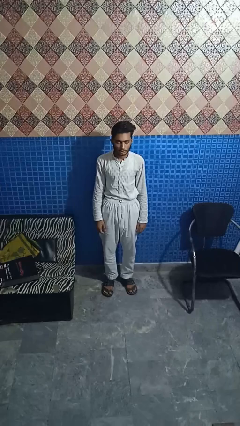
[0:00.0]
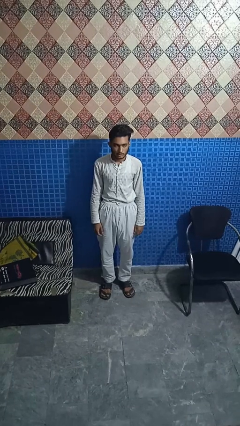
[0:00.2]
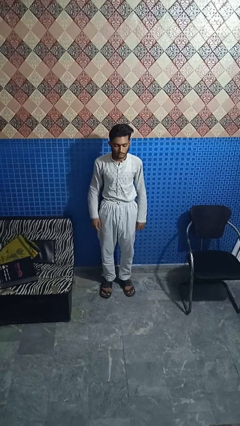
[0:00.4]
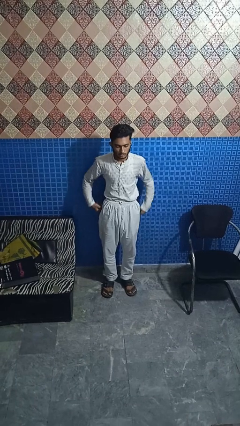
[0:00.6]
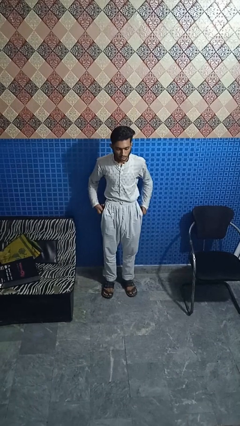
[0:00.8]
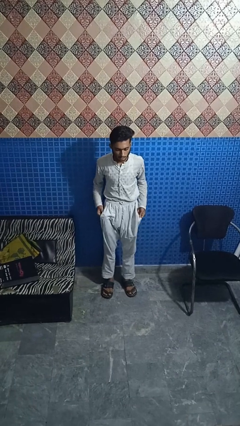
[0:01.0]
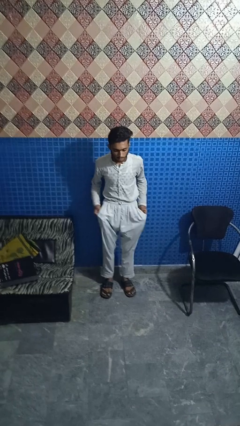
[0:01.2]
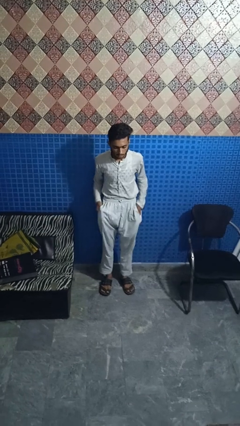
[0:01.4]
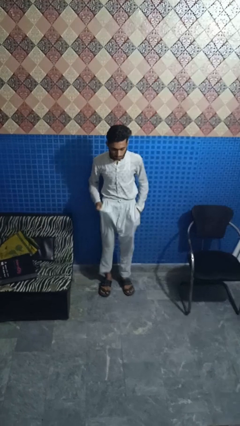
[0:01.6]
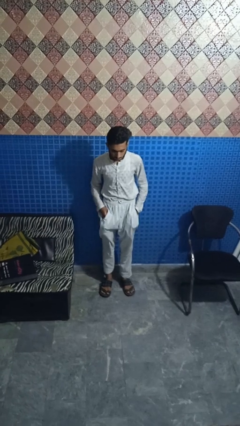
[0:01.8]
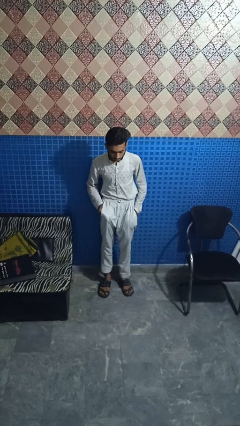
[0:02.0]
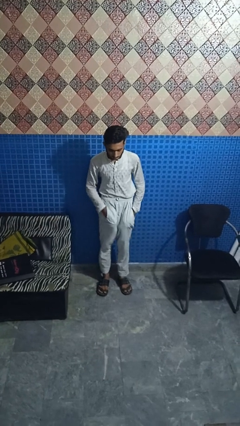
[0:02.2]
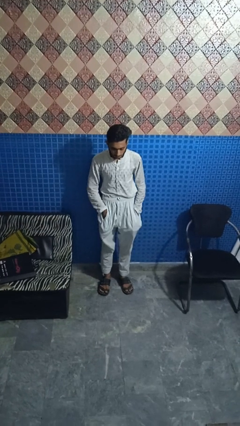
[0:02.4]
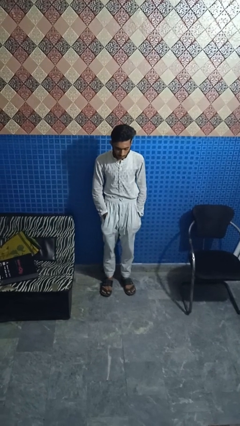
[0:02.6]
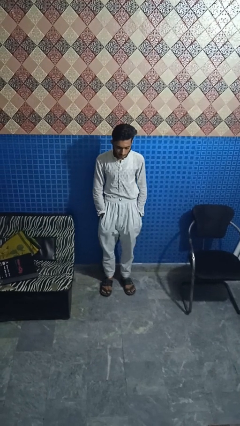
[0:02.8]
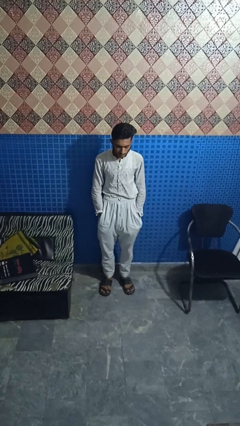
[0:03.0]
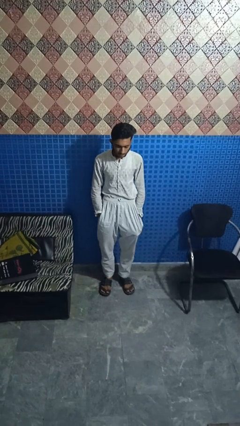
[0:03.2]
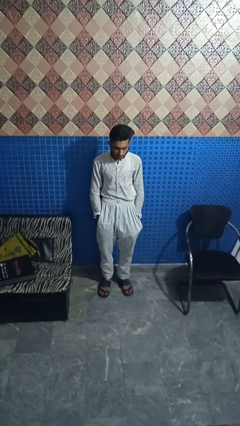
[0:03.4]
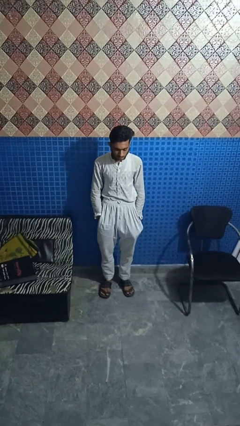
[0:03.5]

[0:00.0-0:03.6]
person puts hands in back pockets

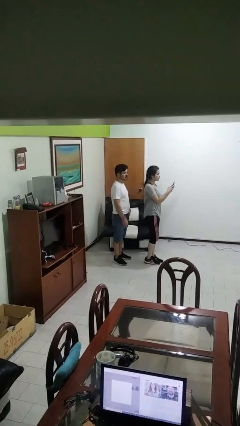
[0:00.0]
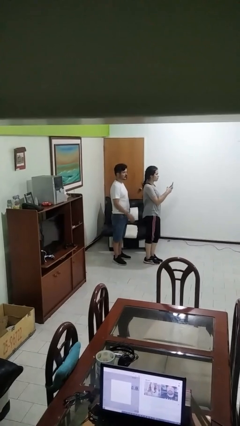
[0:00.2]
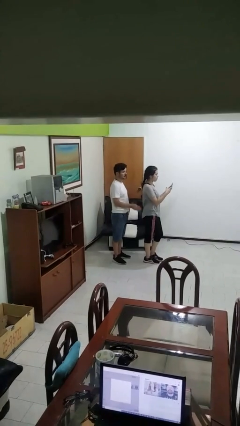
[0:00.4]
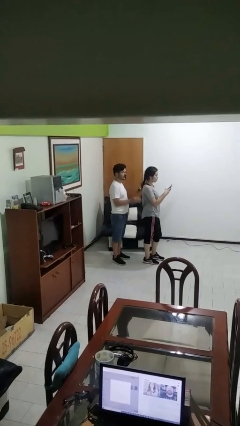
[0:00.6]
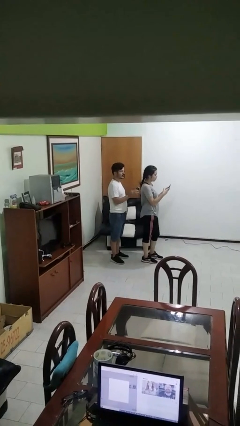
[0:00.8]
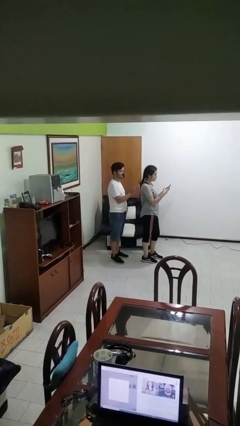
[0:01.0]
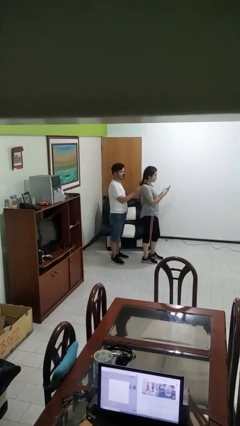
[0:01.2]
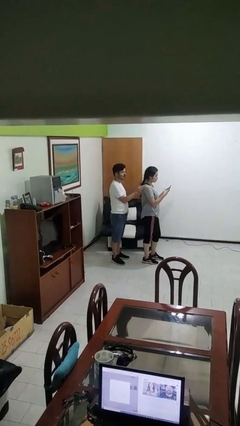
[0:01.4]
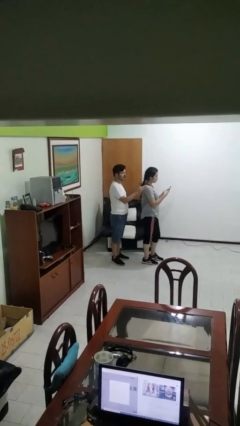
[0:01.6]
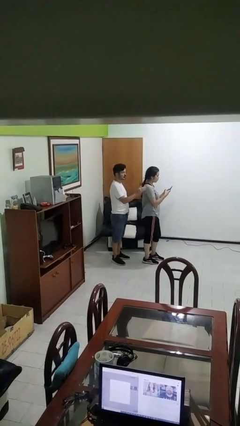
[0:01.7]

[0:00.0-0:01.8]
person touches back of person

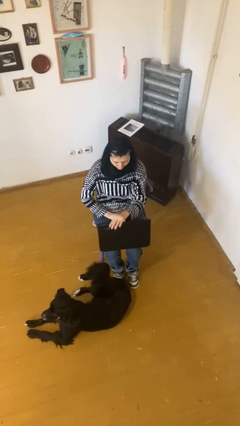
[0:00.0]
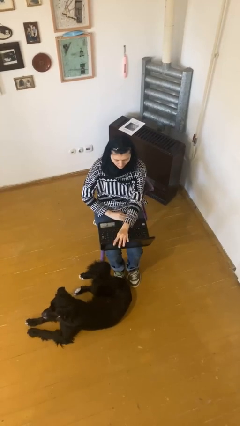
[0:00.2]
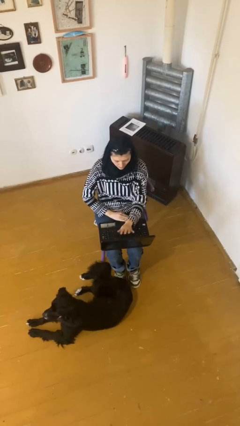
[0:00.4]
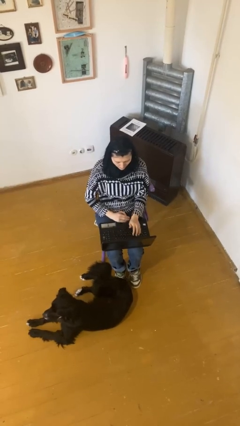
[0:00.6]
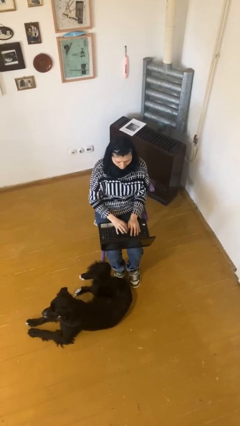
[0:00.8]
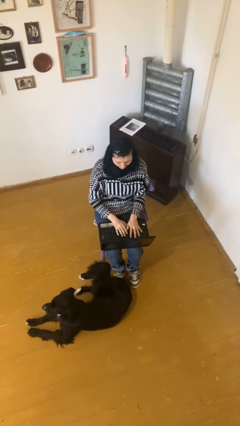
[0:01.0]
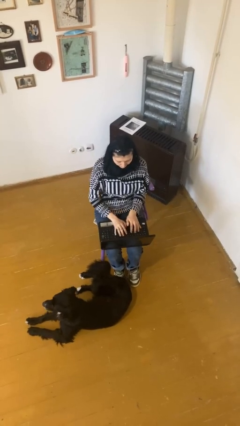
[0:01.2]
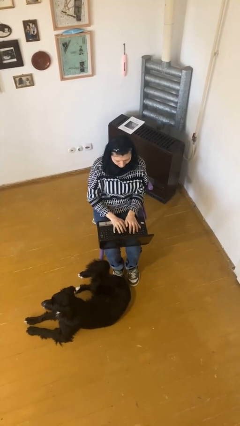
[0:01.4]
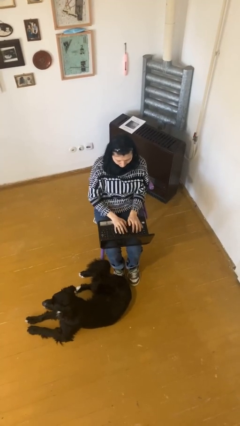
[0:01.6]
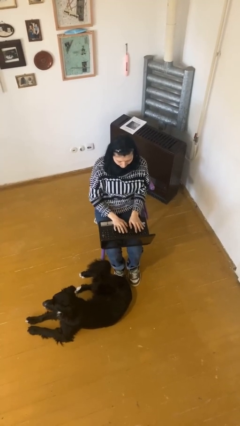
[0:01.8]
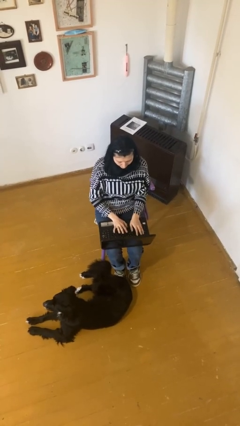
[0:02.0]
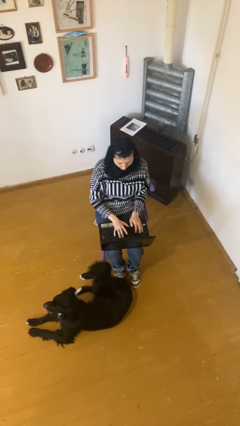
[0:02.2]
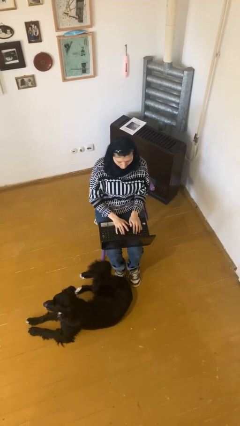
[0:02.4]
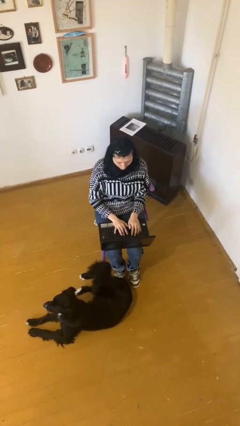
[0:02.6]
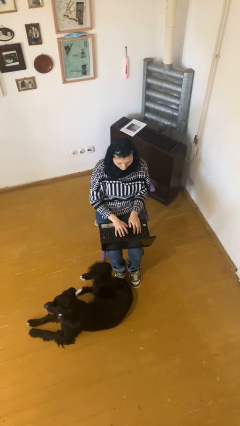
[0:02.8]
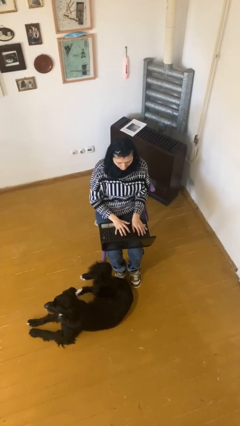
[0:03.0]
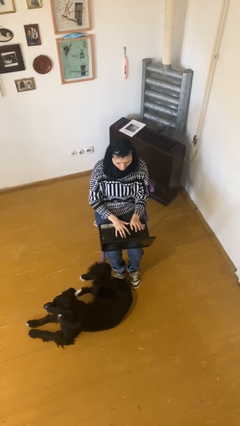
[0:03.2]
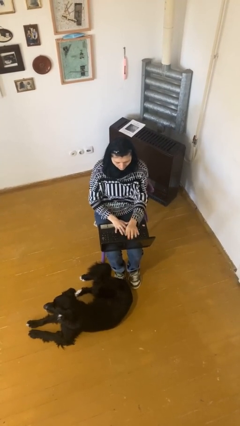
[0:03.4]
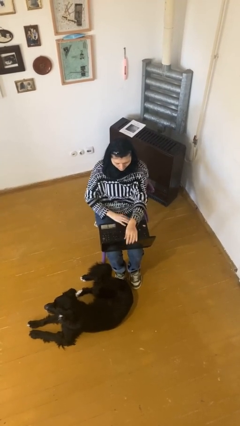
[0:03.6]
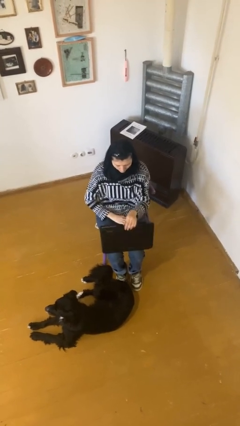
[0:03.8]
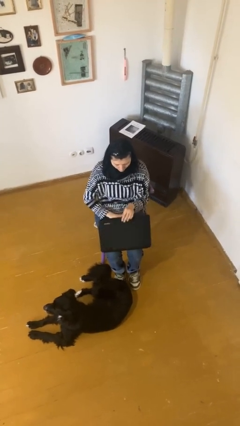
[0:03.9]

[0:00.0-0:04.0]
person interacts with laptop

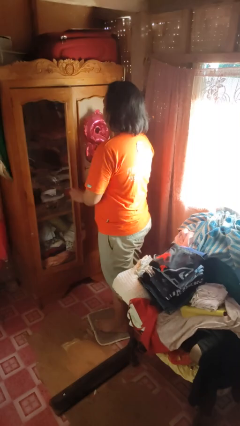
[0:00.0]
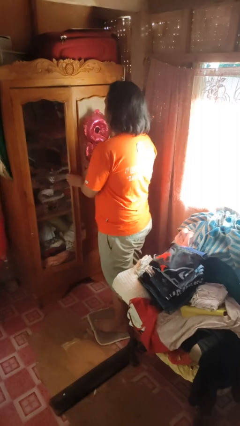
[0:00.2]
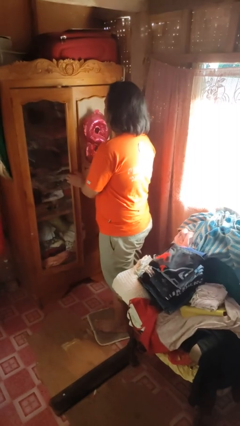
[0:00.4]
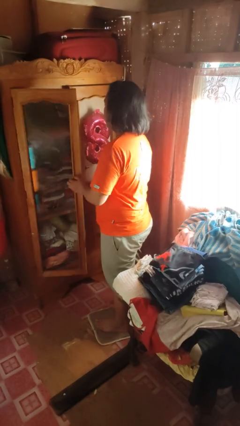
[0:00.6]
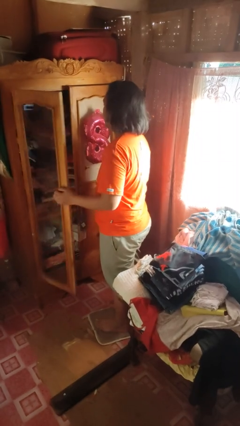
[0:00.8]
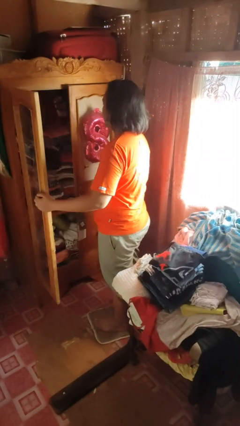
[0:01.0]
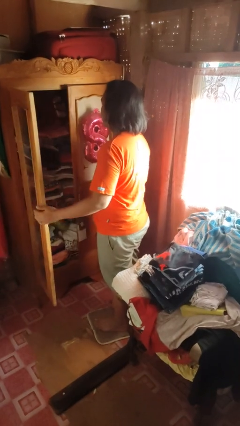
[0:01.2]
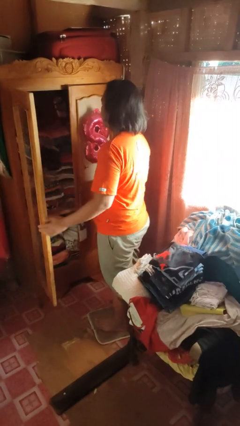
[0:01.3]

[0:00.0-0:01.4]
person opens dresser drawer

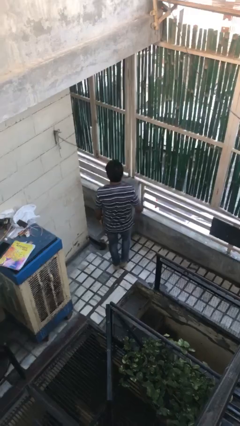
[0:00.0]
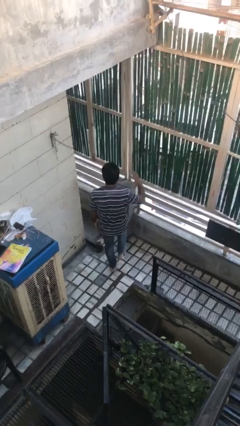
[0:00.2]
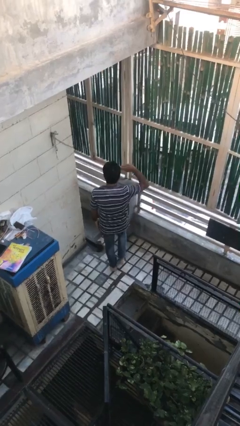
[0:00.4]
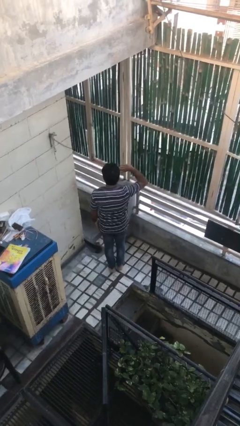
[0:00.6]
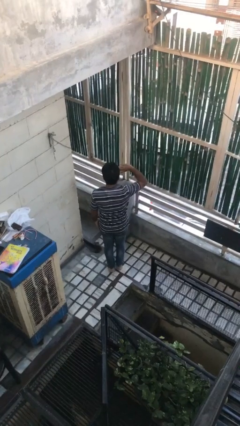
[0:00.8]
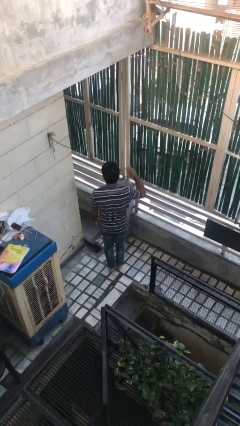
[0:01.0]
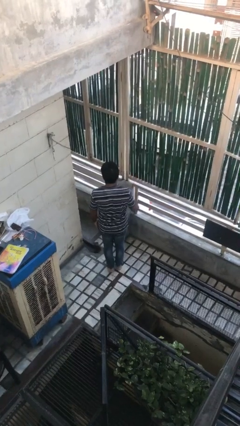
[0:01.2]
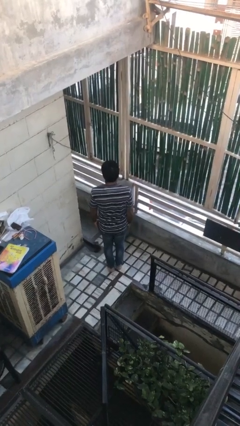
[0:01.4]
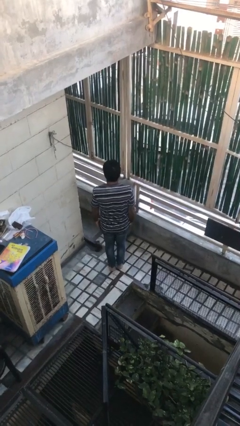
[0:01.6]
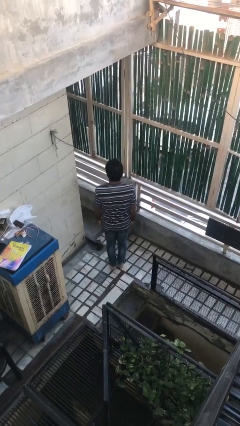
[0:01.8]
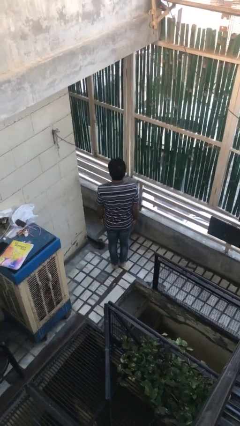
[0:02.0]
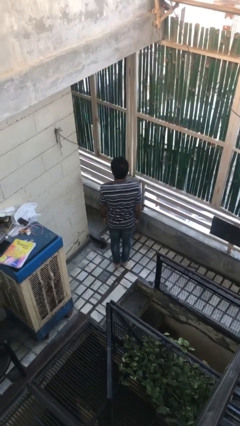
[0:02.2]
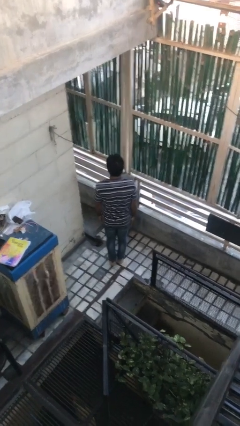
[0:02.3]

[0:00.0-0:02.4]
person salutes

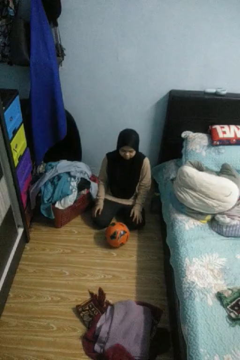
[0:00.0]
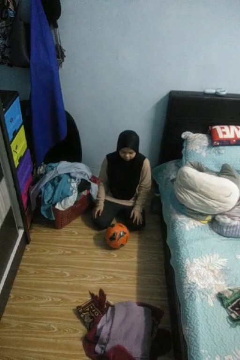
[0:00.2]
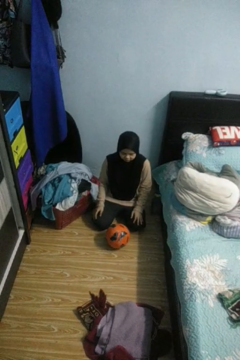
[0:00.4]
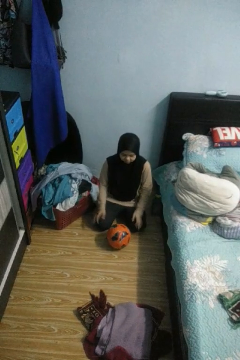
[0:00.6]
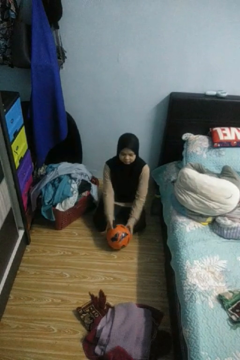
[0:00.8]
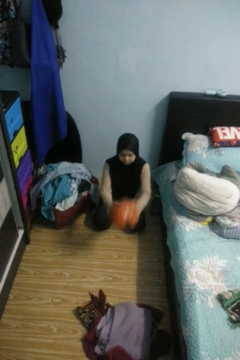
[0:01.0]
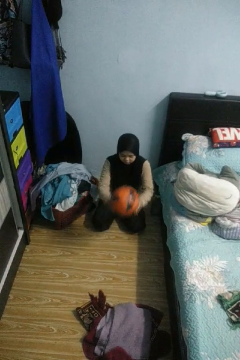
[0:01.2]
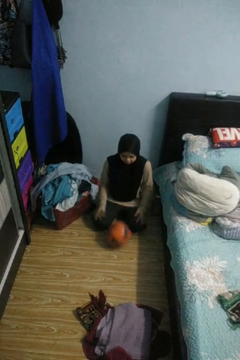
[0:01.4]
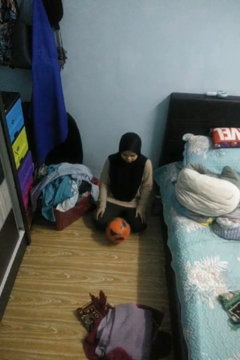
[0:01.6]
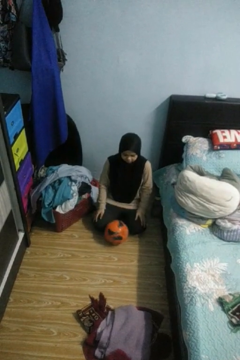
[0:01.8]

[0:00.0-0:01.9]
person bounces ball on floor

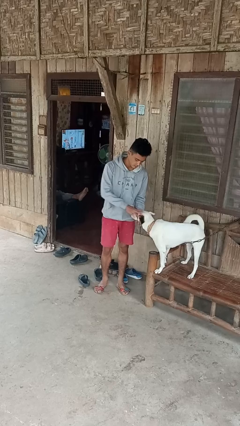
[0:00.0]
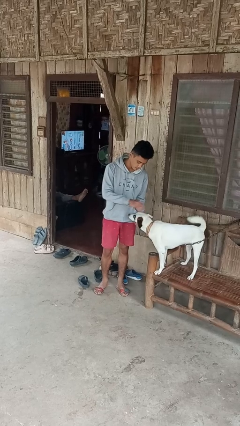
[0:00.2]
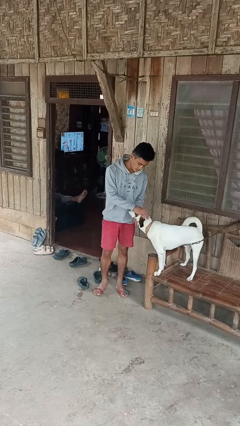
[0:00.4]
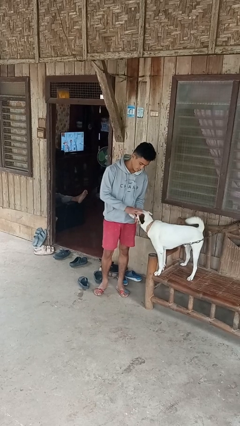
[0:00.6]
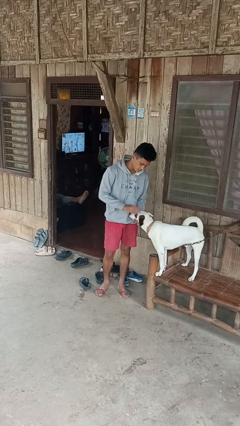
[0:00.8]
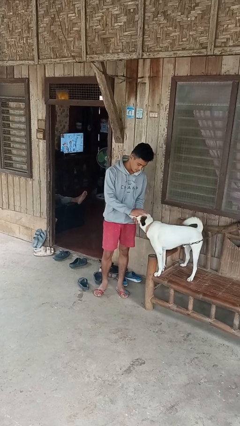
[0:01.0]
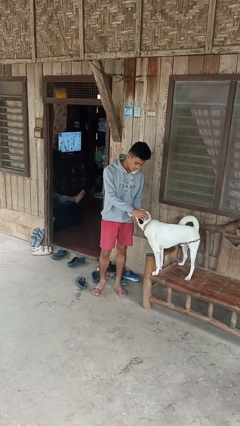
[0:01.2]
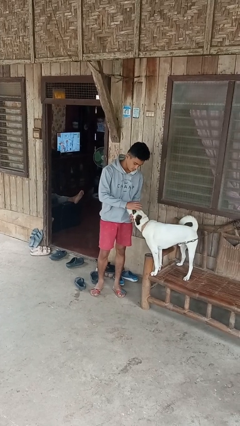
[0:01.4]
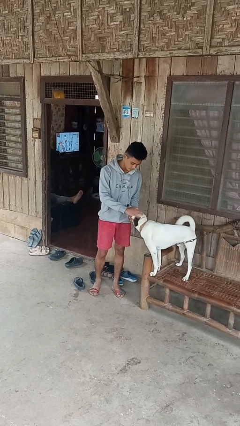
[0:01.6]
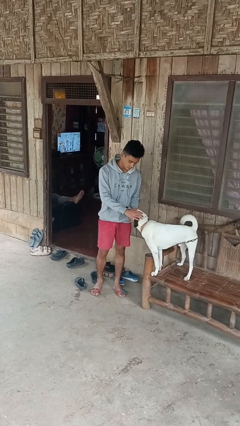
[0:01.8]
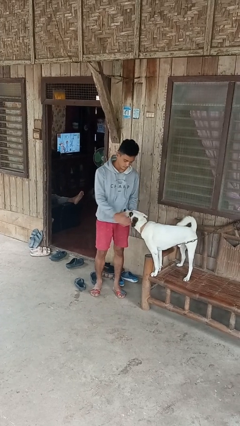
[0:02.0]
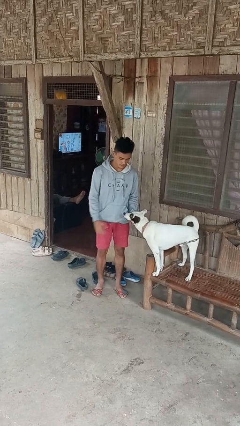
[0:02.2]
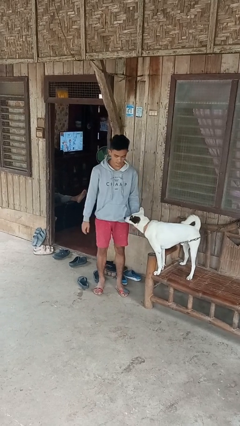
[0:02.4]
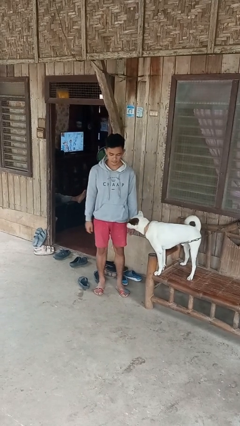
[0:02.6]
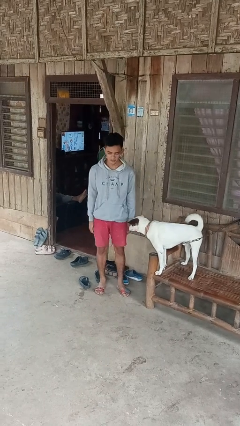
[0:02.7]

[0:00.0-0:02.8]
person pets dog
